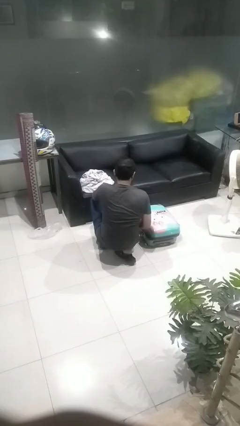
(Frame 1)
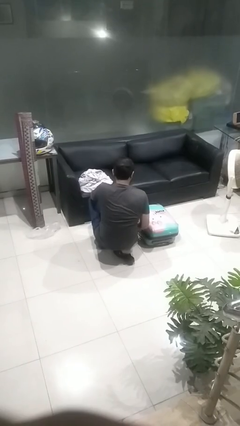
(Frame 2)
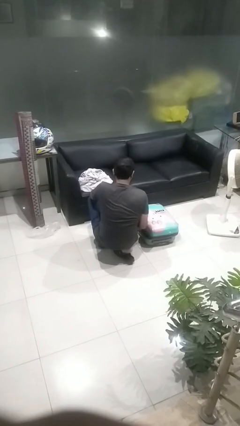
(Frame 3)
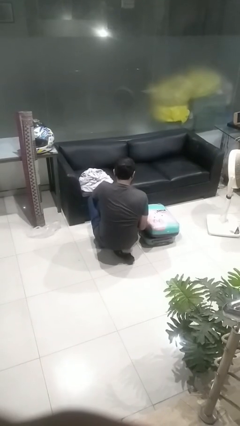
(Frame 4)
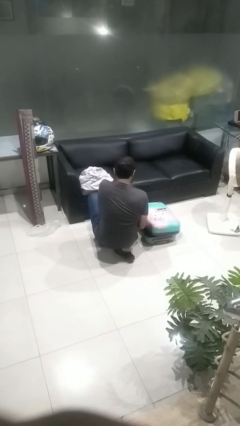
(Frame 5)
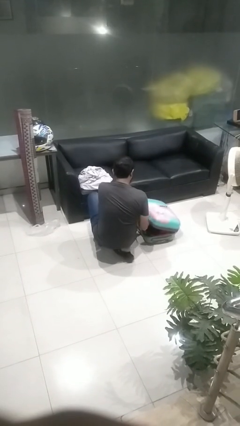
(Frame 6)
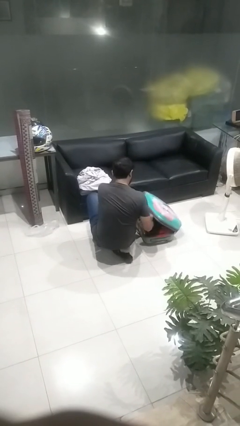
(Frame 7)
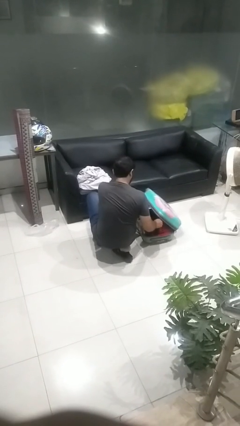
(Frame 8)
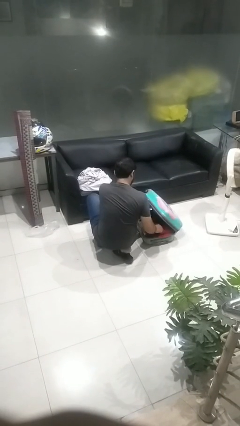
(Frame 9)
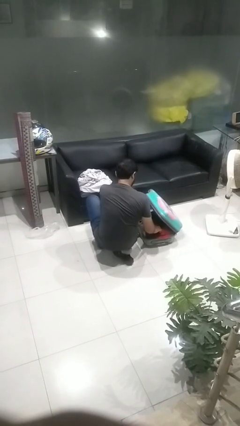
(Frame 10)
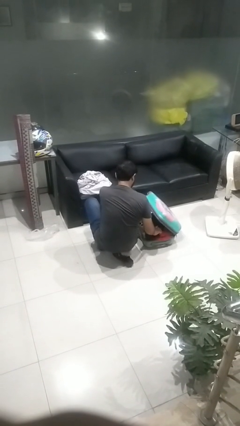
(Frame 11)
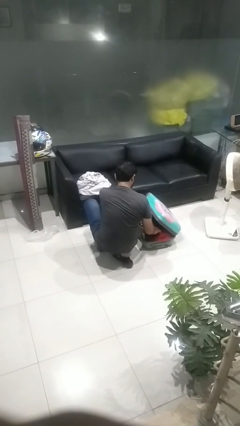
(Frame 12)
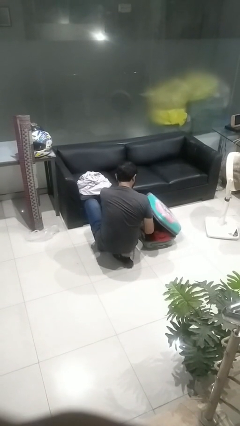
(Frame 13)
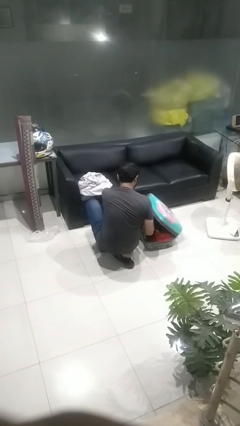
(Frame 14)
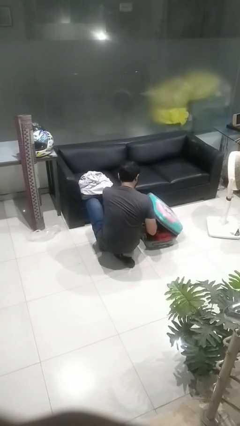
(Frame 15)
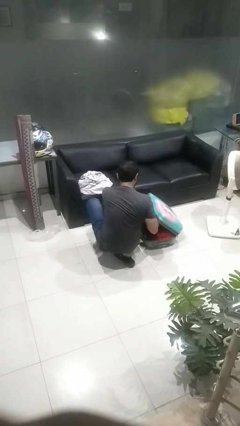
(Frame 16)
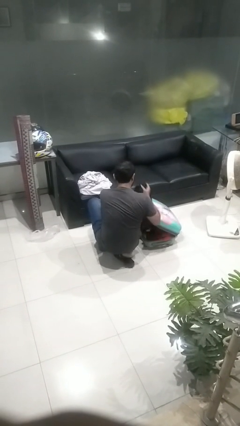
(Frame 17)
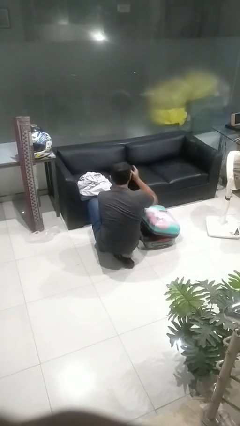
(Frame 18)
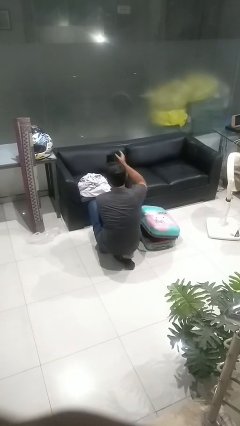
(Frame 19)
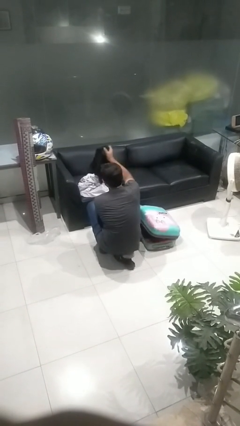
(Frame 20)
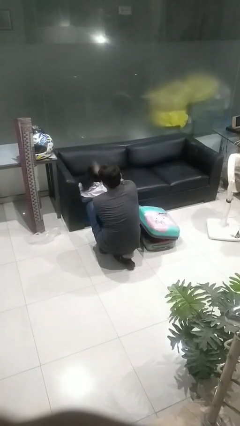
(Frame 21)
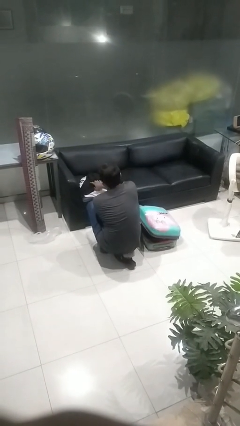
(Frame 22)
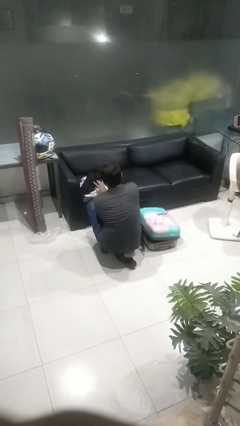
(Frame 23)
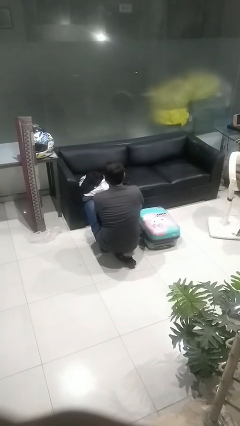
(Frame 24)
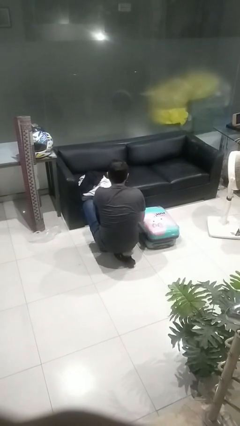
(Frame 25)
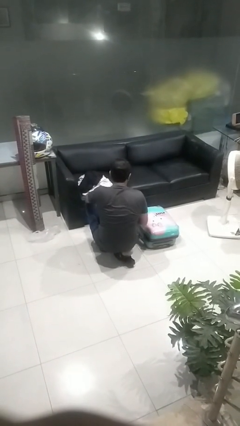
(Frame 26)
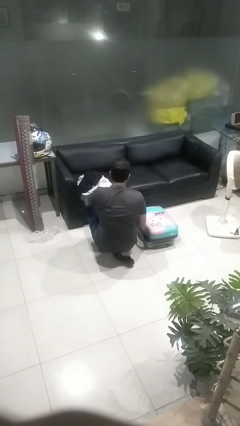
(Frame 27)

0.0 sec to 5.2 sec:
person unloads clothes from suitcase

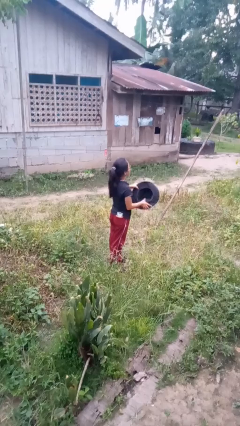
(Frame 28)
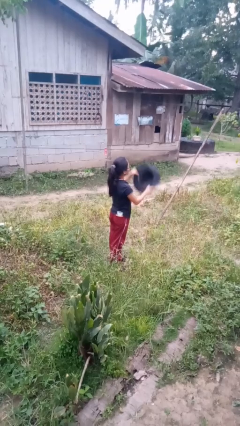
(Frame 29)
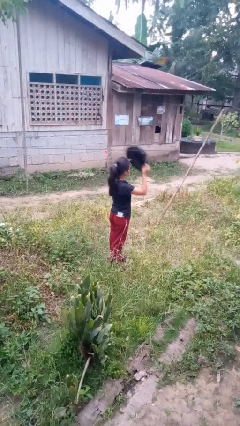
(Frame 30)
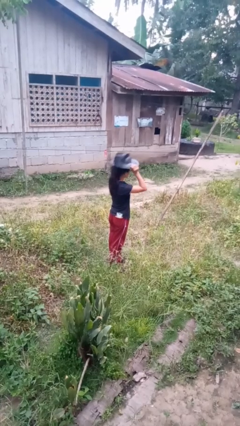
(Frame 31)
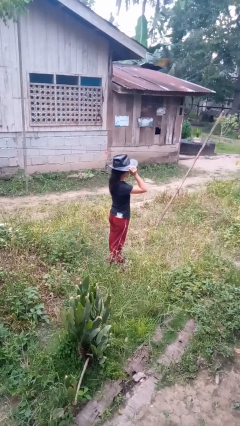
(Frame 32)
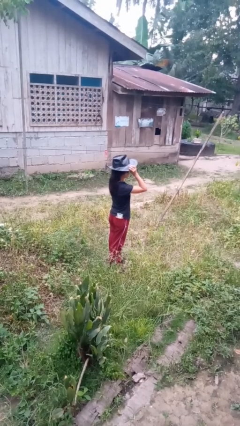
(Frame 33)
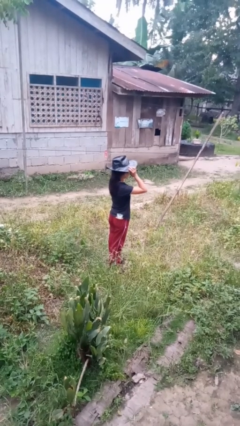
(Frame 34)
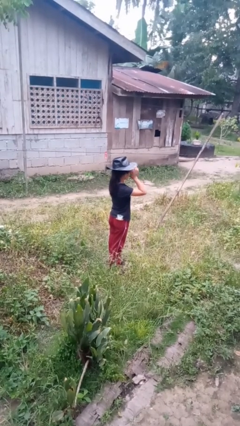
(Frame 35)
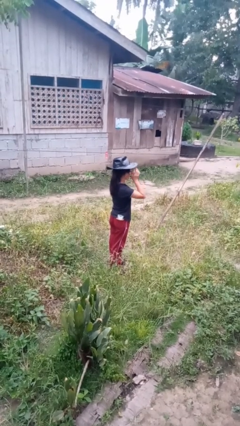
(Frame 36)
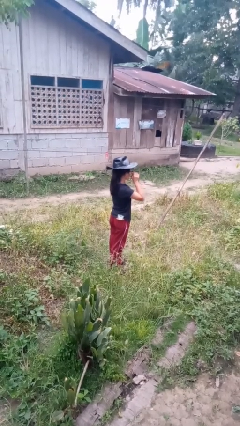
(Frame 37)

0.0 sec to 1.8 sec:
person puts on hat

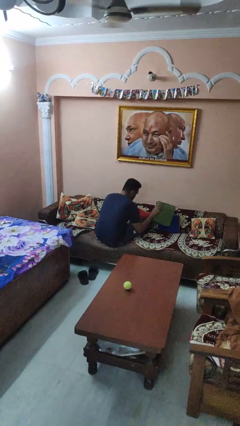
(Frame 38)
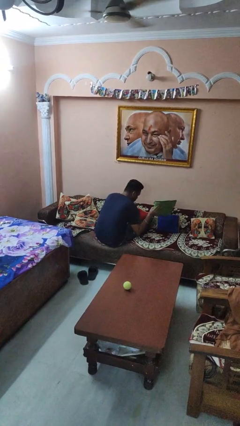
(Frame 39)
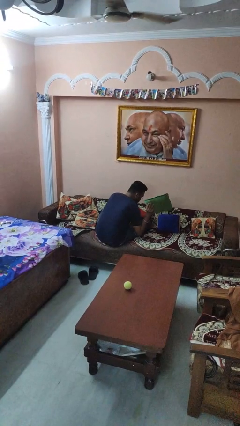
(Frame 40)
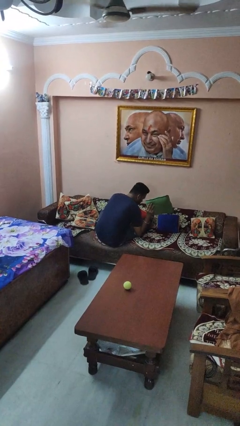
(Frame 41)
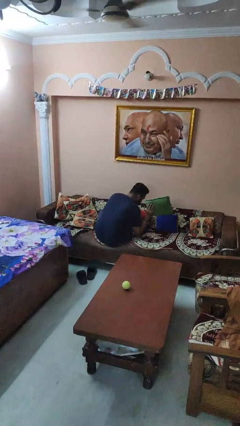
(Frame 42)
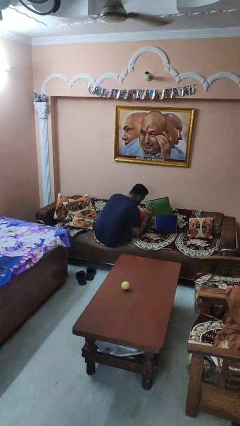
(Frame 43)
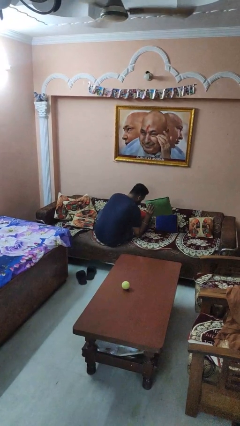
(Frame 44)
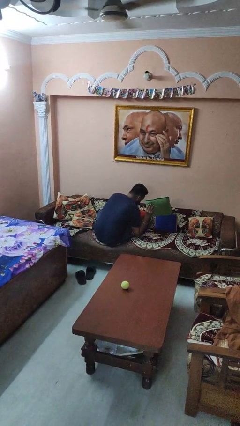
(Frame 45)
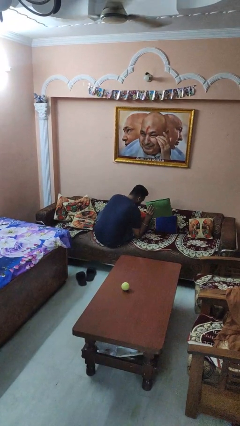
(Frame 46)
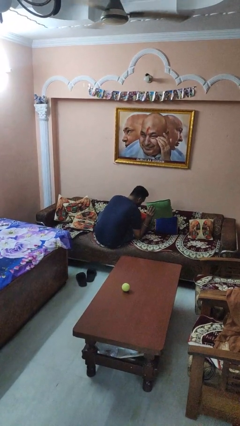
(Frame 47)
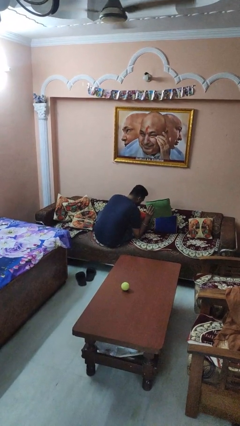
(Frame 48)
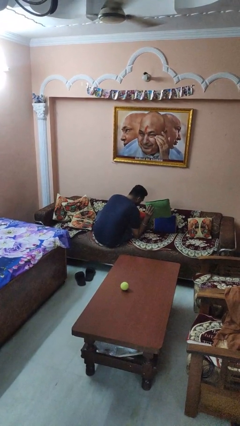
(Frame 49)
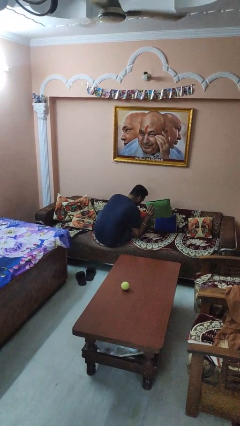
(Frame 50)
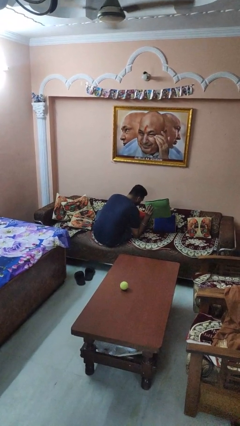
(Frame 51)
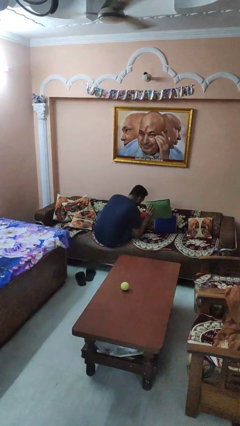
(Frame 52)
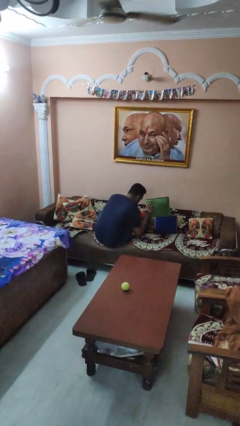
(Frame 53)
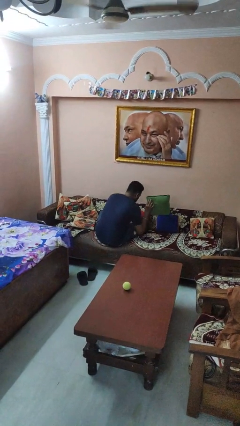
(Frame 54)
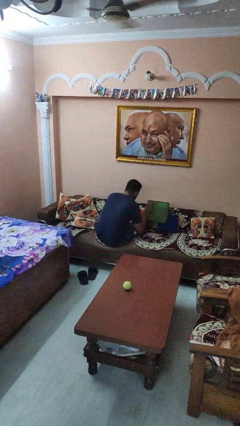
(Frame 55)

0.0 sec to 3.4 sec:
person searches in couch

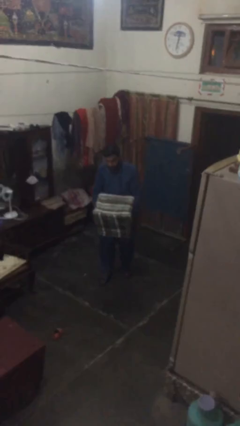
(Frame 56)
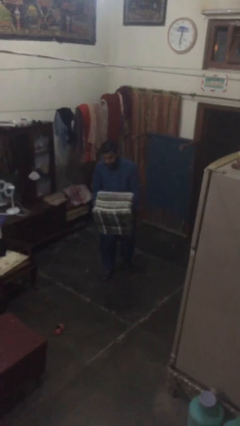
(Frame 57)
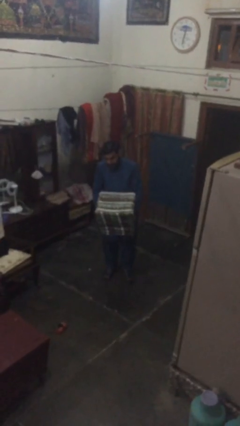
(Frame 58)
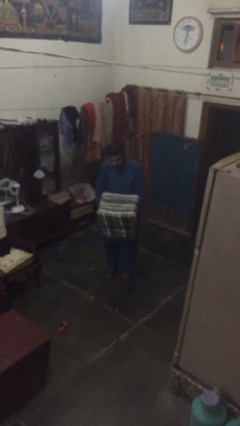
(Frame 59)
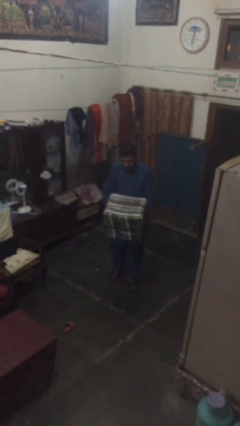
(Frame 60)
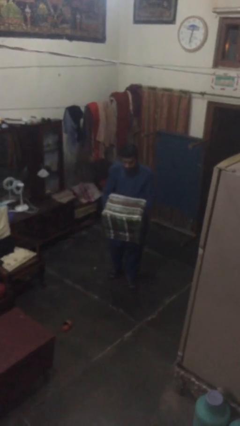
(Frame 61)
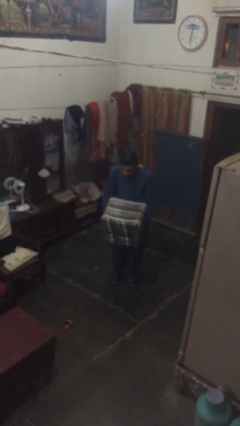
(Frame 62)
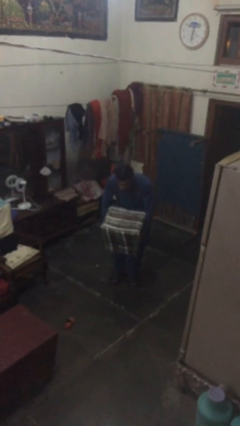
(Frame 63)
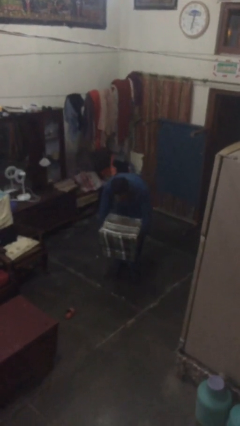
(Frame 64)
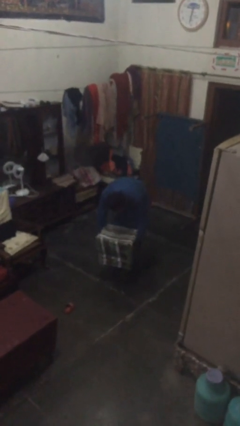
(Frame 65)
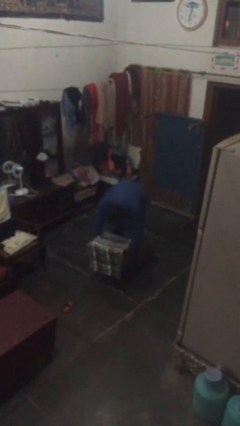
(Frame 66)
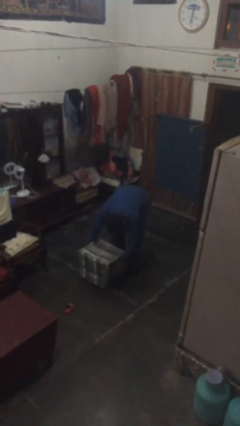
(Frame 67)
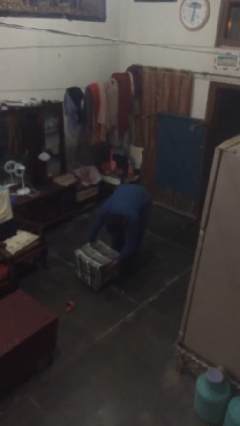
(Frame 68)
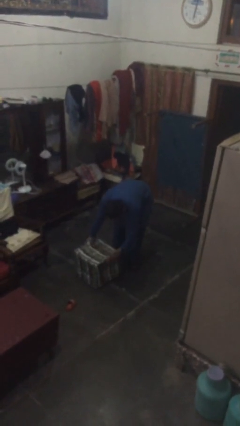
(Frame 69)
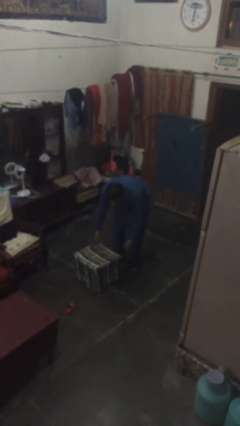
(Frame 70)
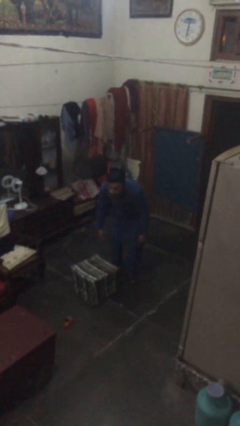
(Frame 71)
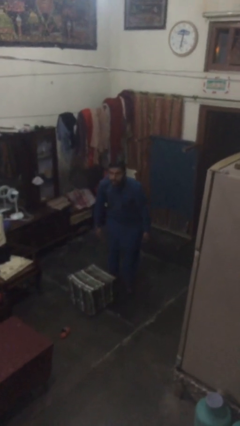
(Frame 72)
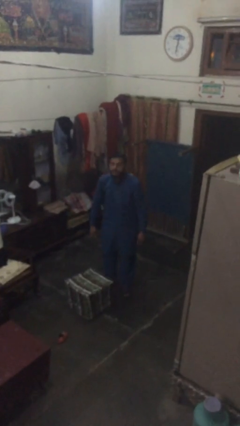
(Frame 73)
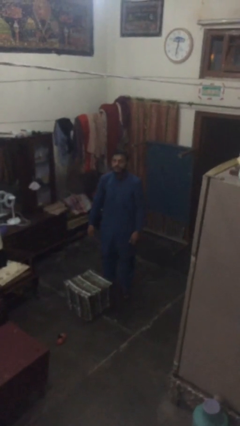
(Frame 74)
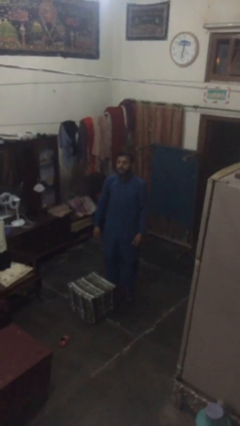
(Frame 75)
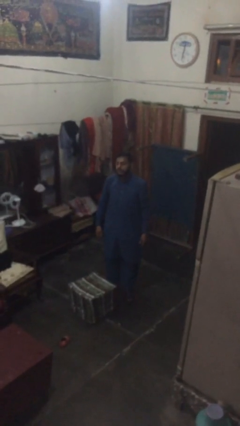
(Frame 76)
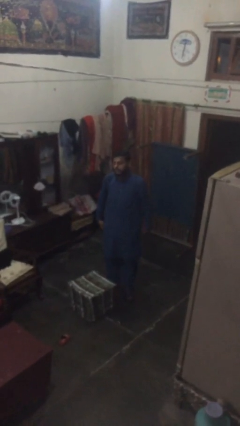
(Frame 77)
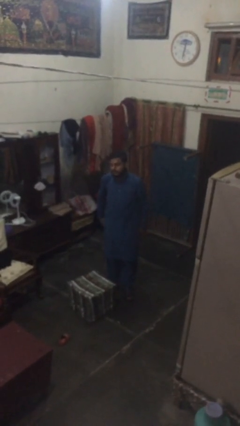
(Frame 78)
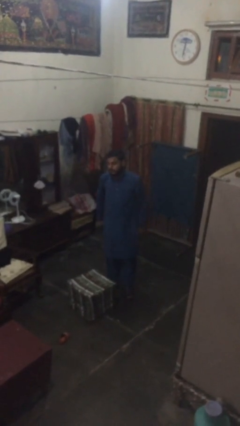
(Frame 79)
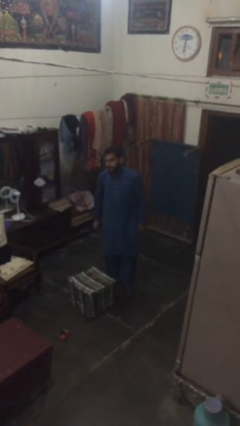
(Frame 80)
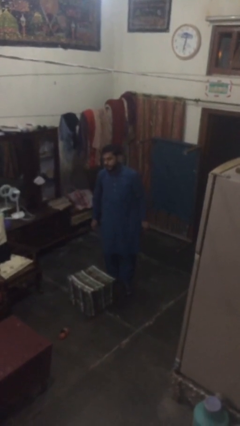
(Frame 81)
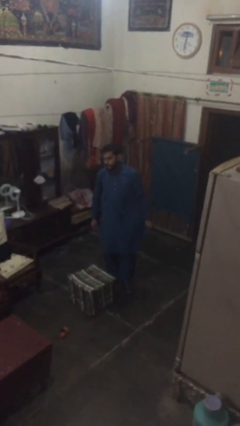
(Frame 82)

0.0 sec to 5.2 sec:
person puts down object on floor

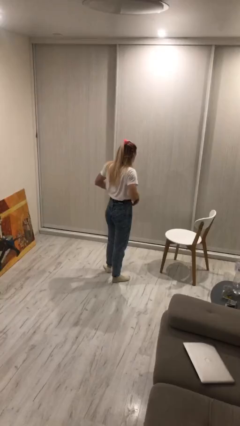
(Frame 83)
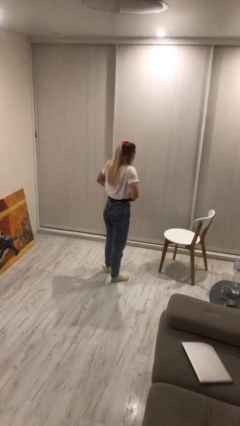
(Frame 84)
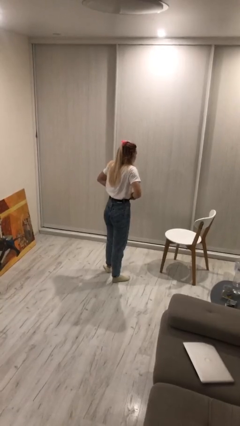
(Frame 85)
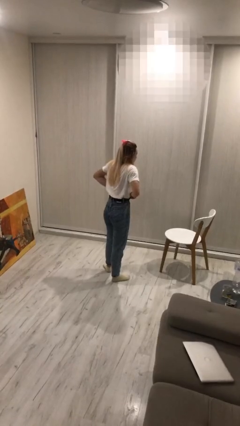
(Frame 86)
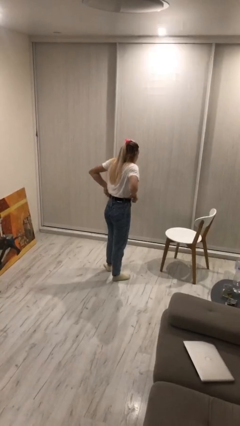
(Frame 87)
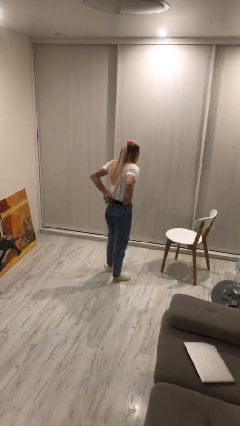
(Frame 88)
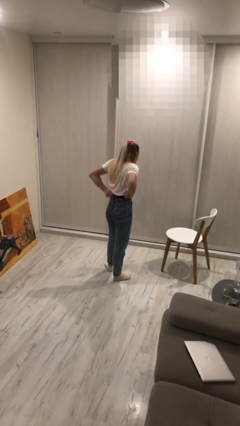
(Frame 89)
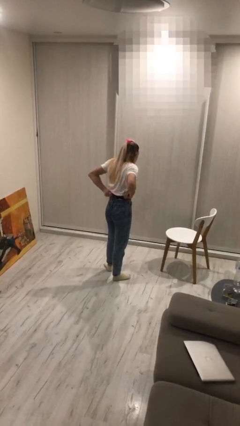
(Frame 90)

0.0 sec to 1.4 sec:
person hikes up pants

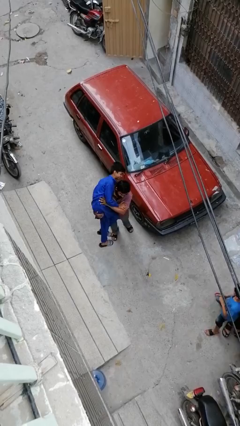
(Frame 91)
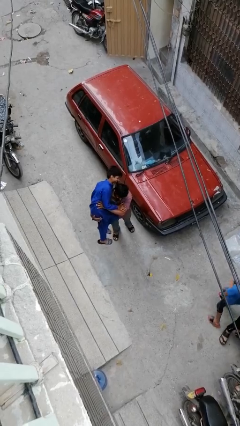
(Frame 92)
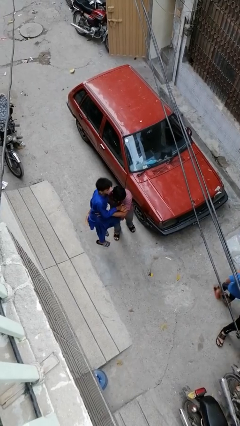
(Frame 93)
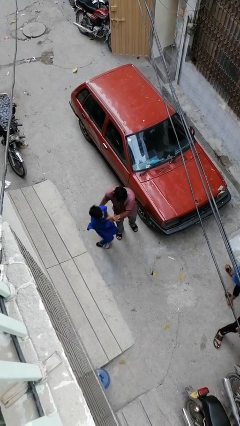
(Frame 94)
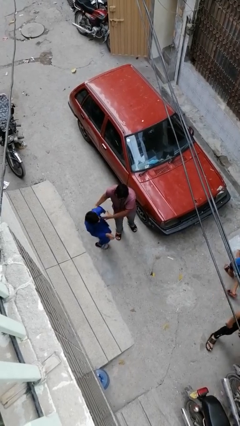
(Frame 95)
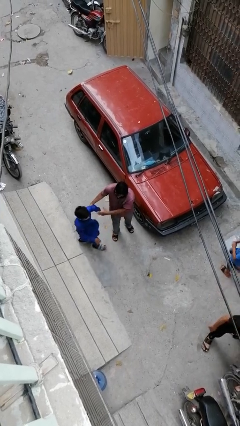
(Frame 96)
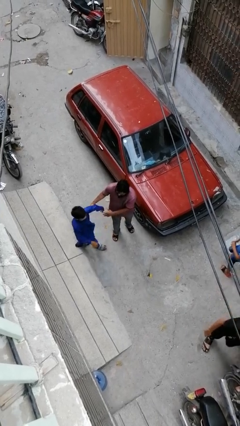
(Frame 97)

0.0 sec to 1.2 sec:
person puts down person
